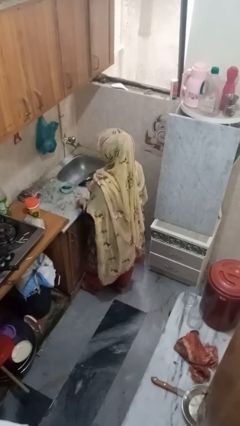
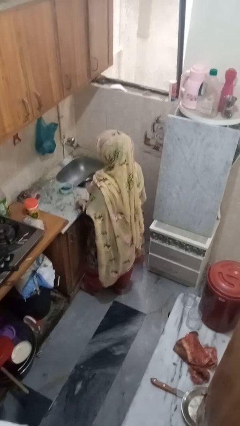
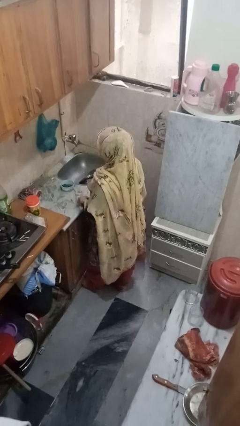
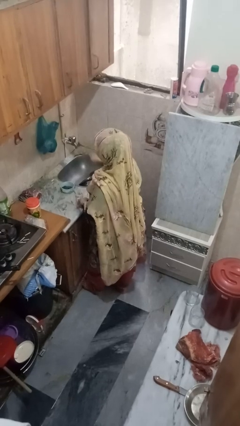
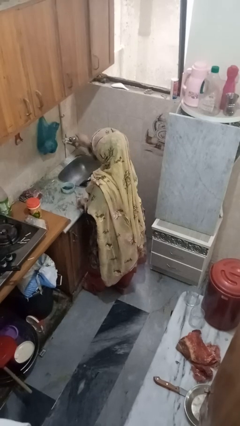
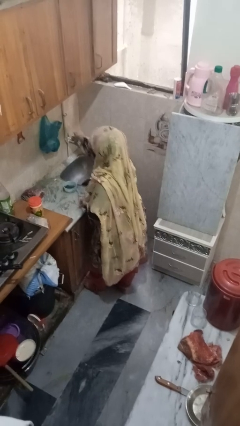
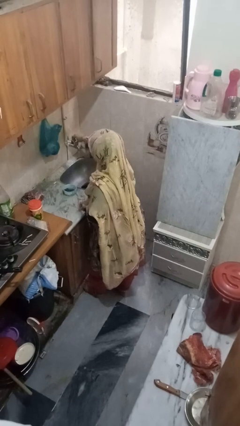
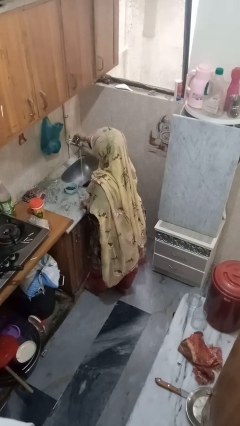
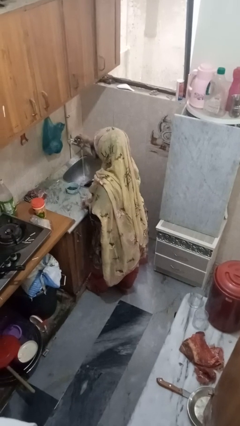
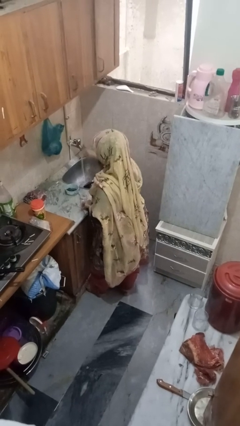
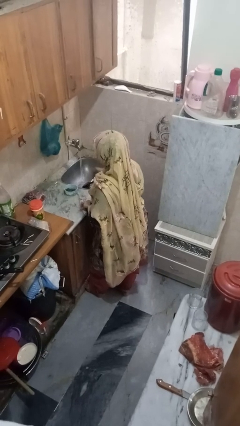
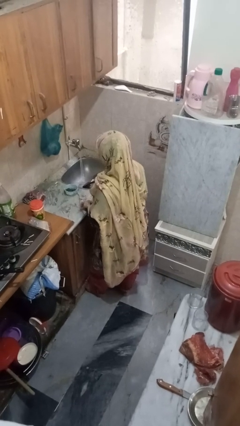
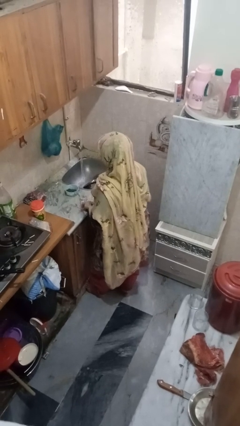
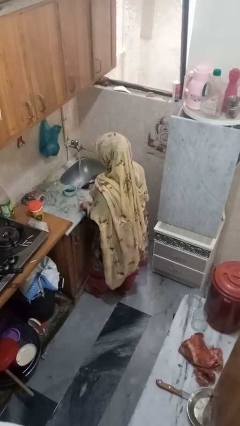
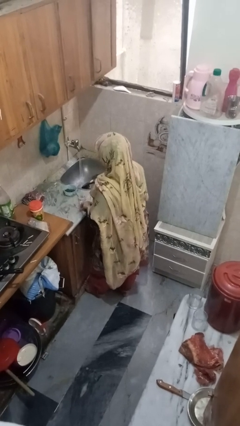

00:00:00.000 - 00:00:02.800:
person turns on faucet

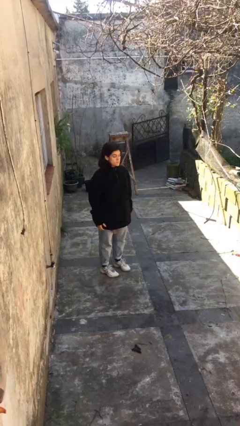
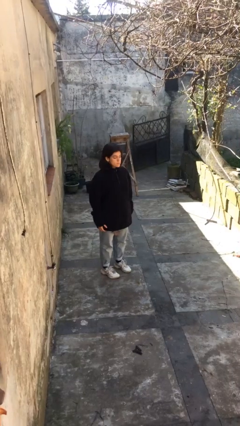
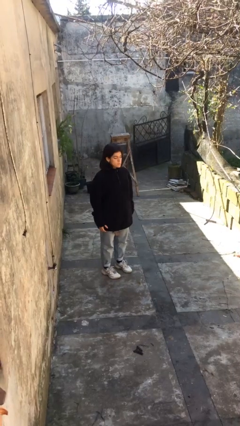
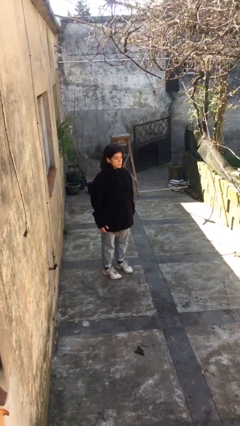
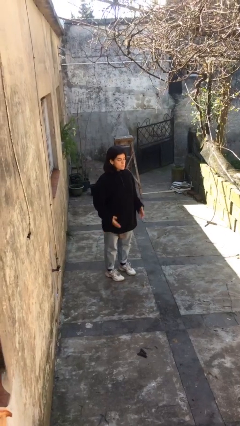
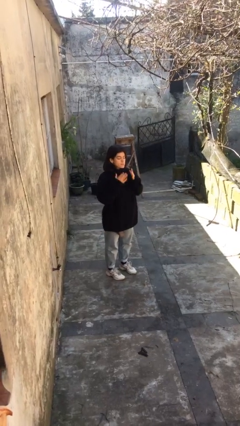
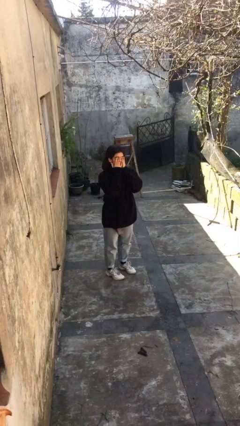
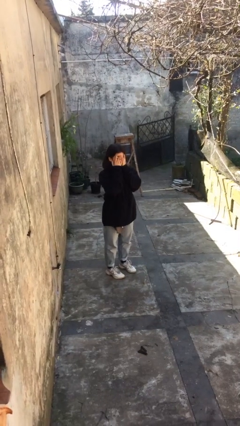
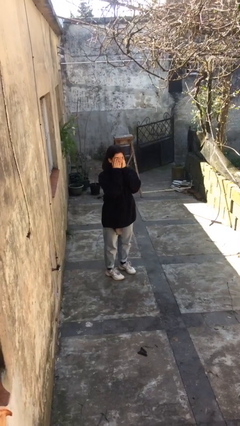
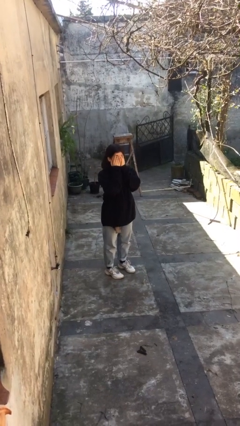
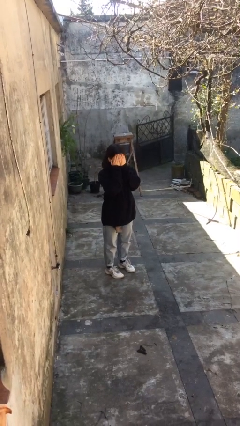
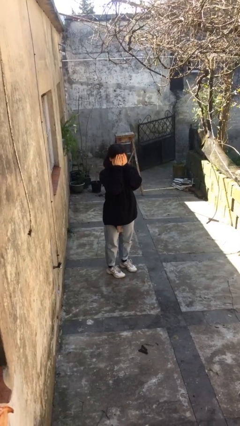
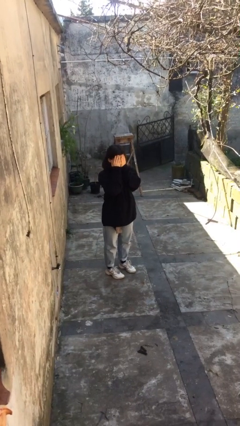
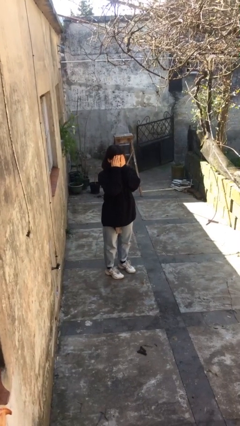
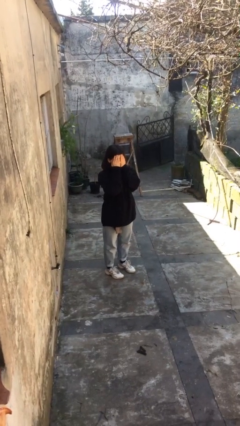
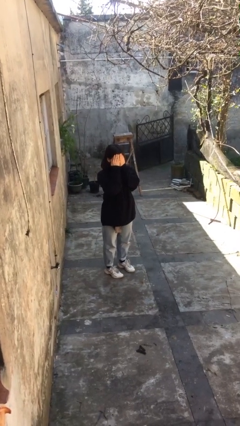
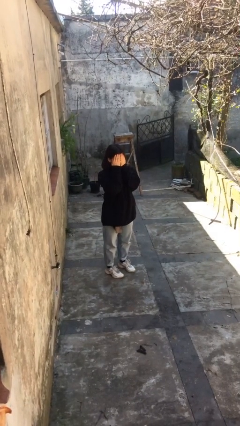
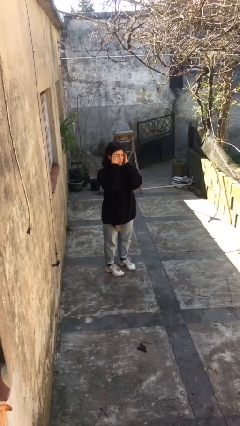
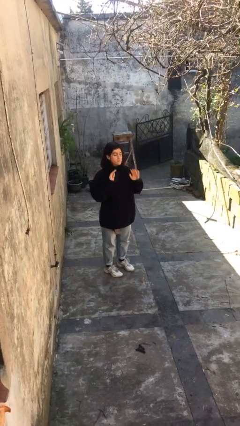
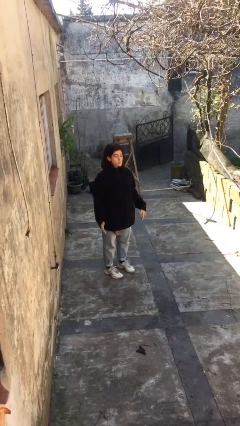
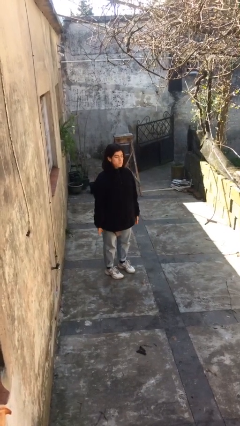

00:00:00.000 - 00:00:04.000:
person covers face with hands

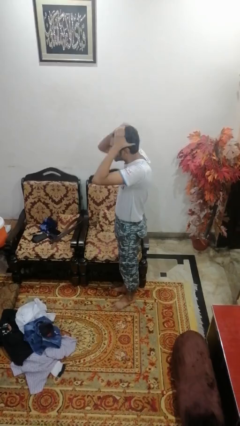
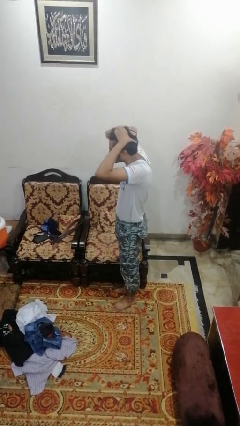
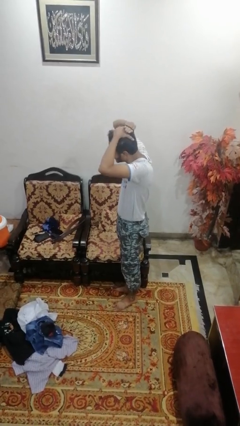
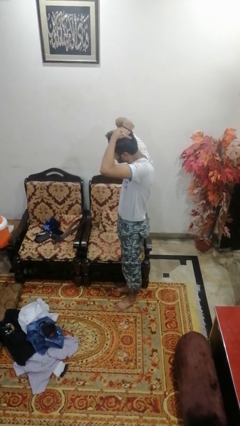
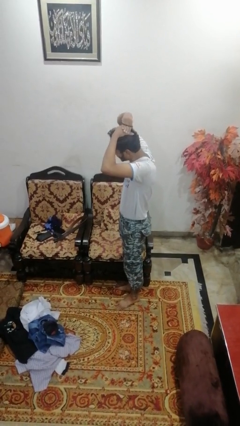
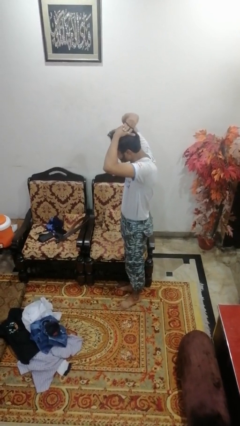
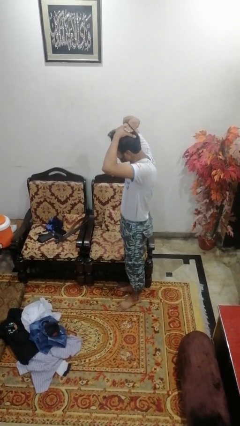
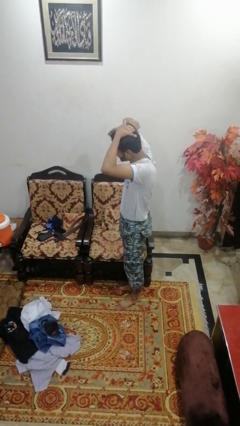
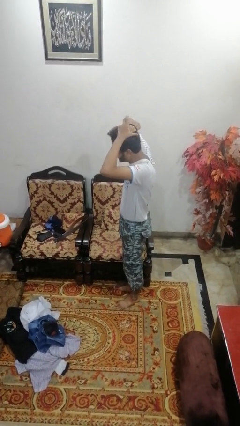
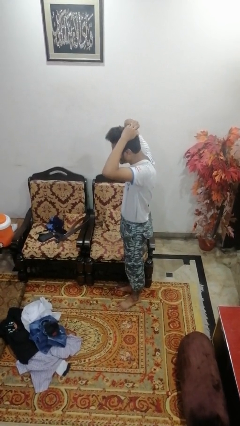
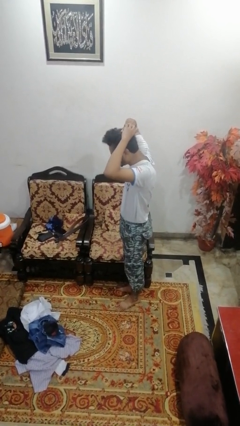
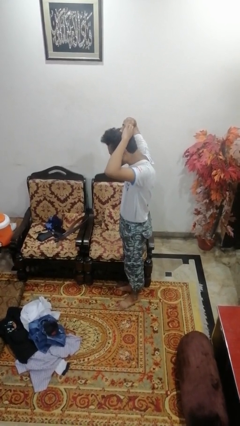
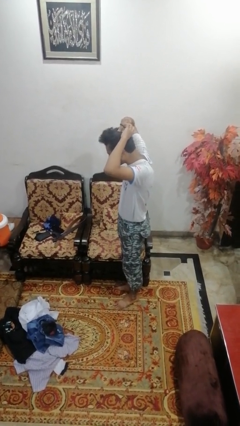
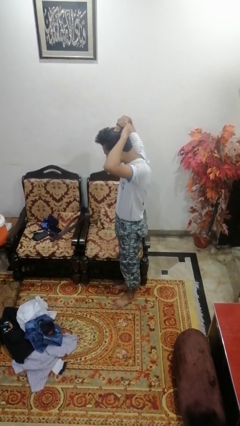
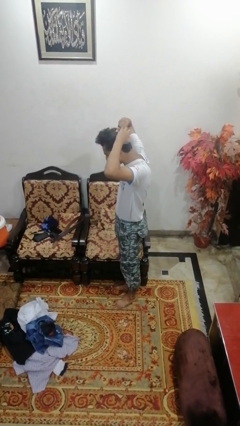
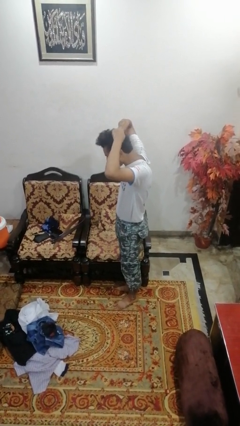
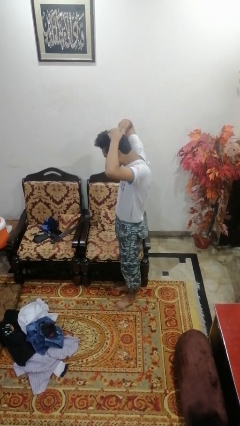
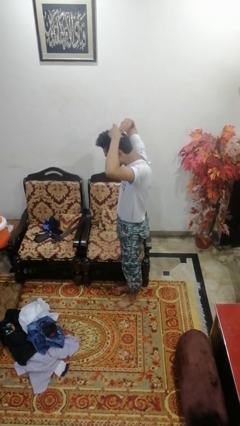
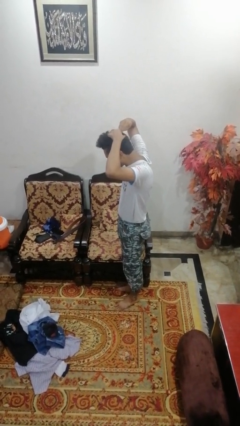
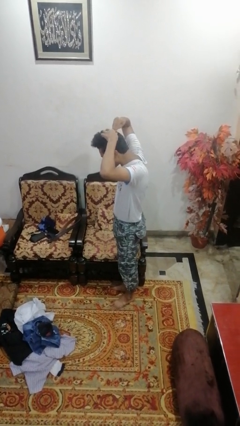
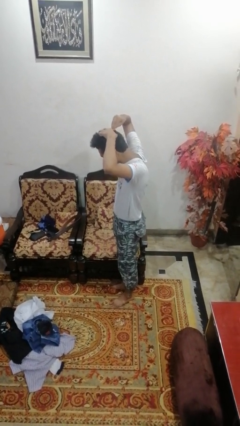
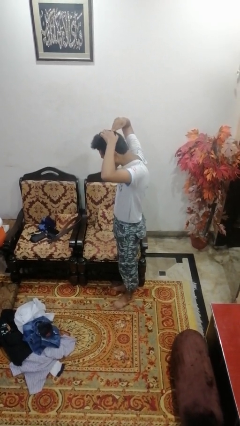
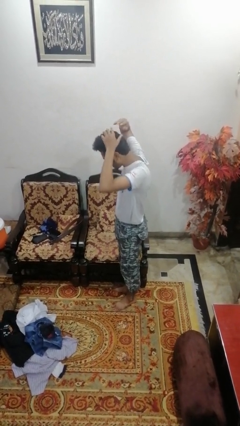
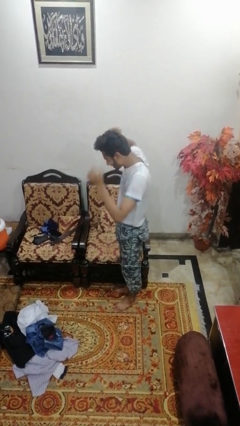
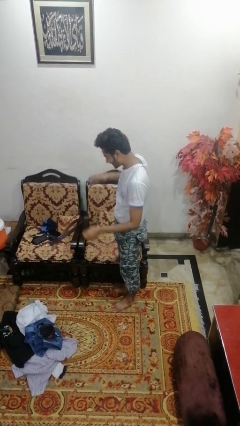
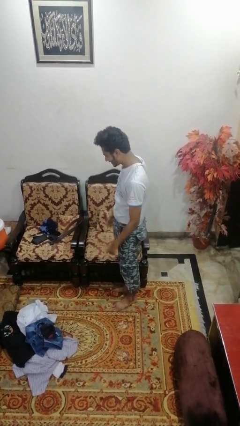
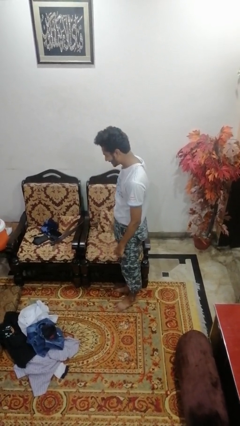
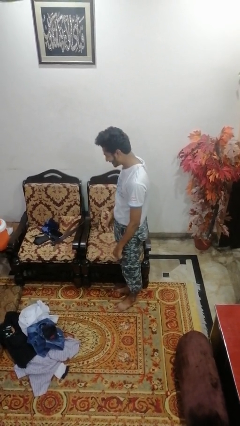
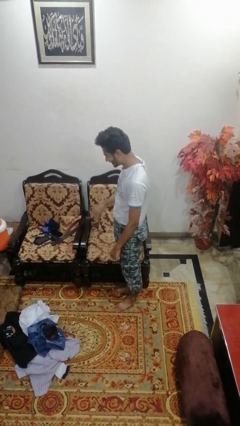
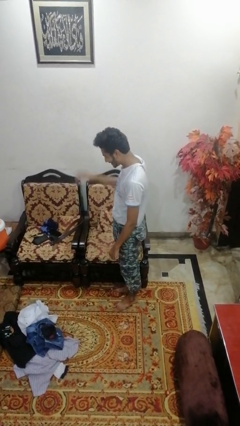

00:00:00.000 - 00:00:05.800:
person puts hair in ponytail

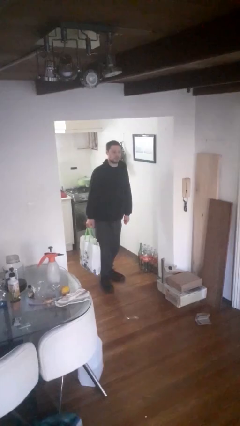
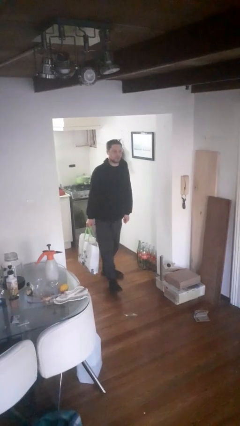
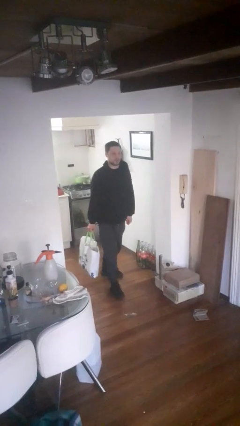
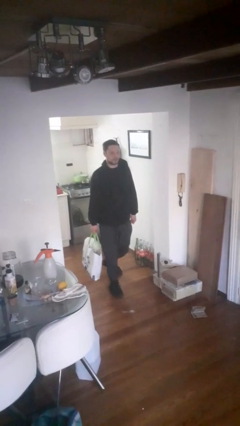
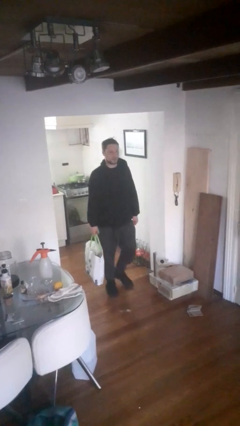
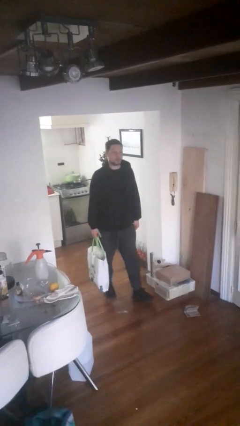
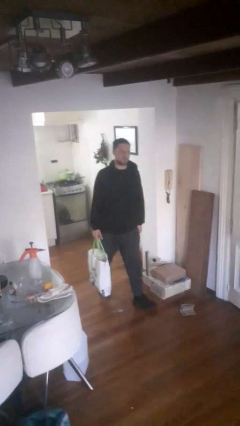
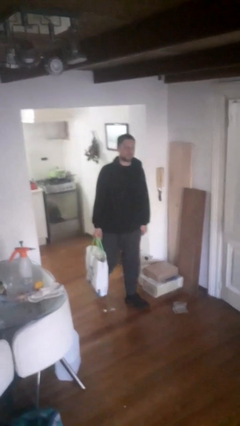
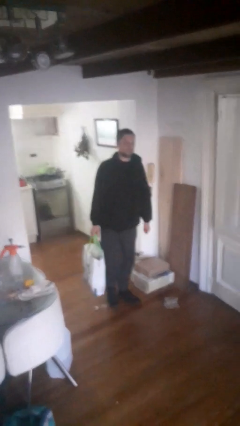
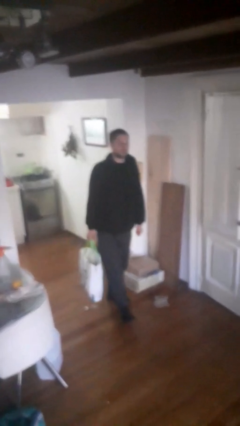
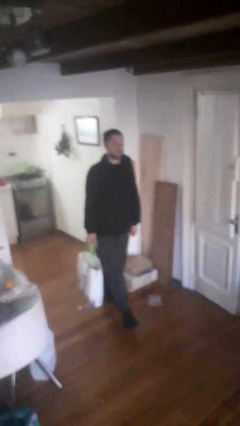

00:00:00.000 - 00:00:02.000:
person carries groceries

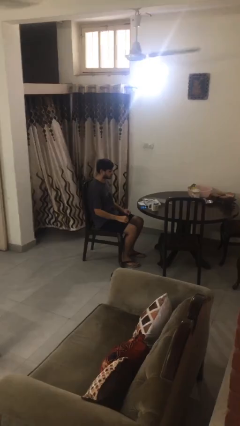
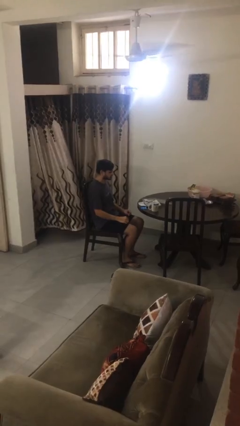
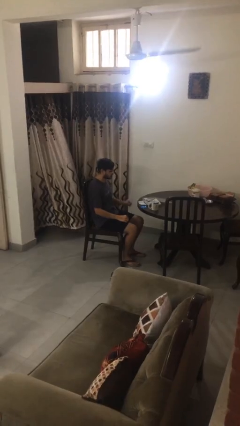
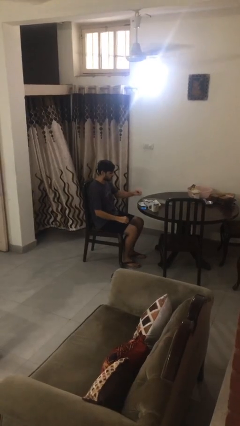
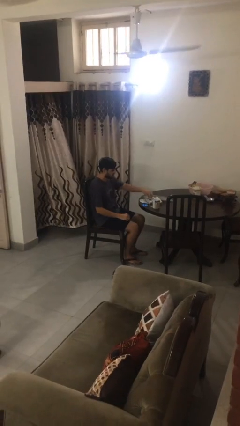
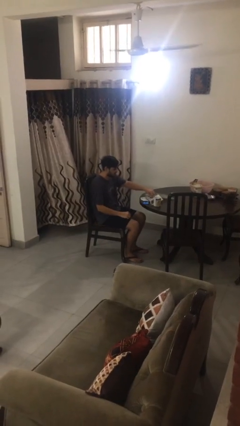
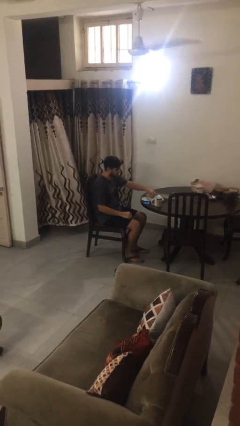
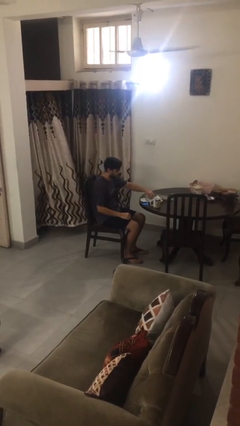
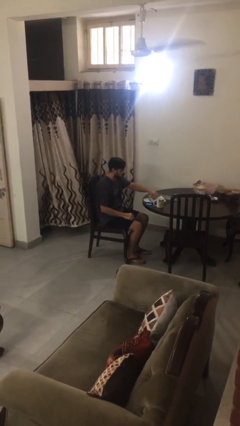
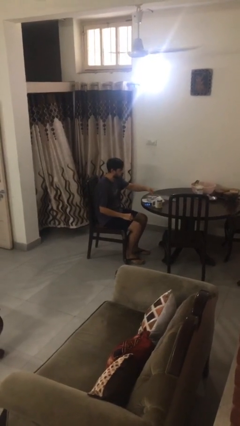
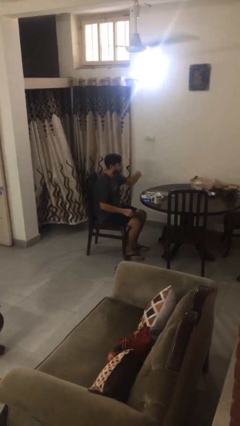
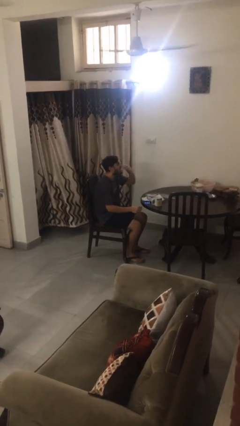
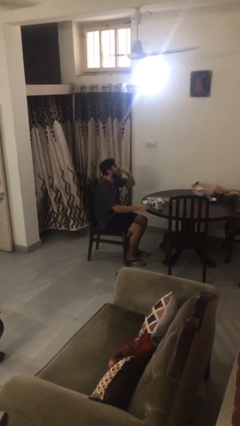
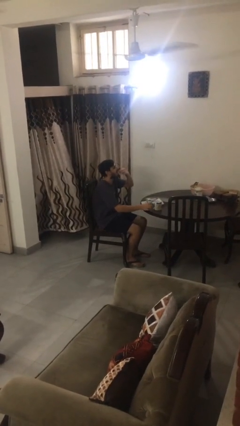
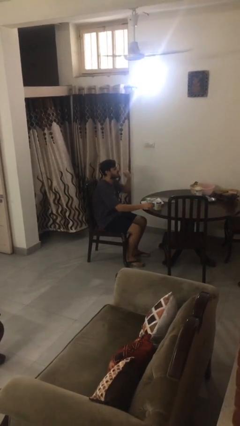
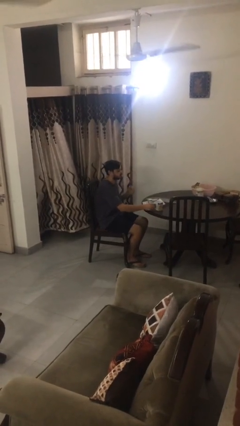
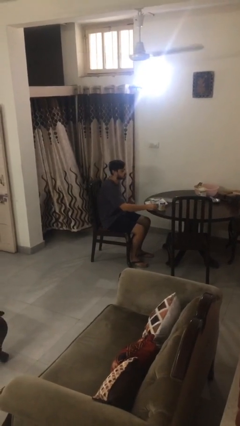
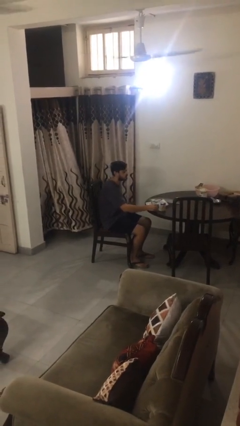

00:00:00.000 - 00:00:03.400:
person takes medicine pills
